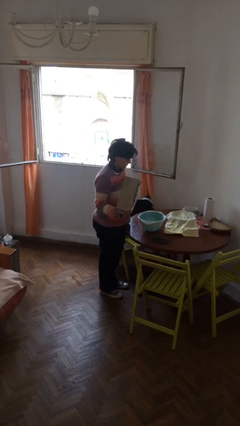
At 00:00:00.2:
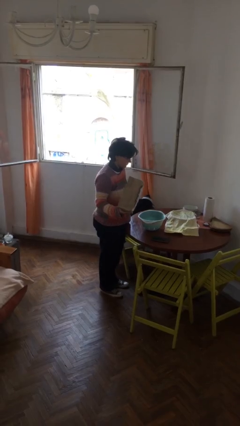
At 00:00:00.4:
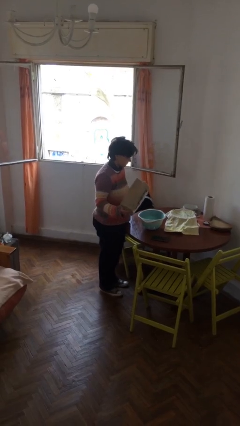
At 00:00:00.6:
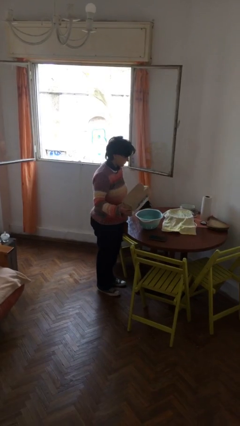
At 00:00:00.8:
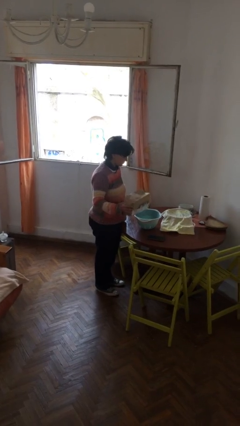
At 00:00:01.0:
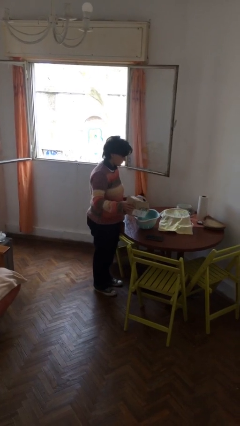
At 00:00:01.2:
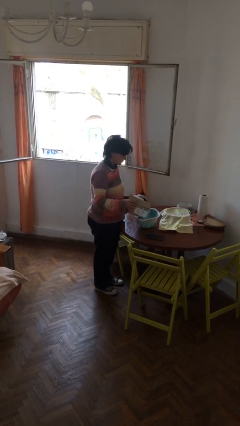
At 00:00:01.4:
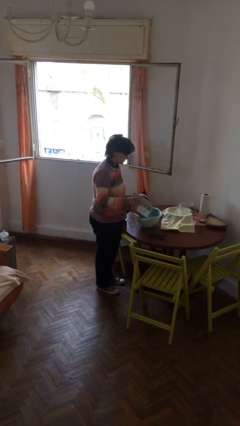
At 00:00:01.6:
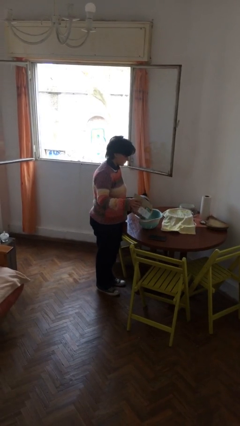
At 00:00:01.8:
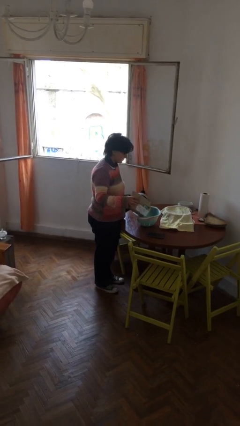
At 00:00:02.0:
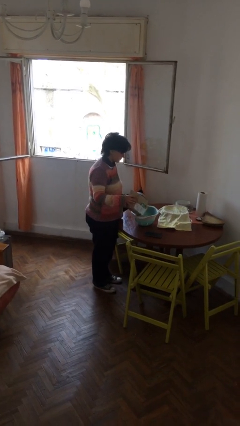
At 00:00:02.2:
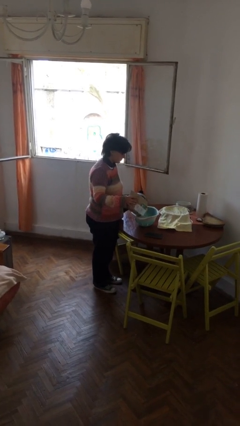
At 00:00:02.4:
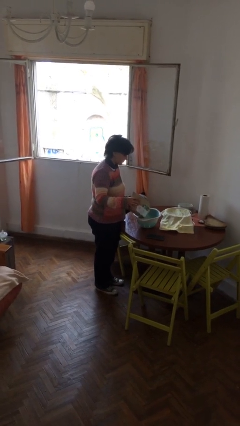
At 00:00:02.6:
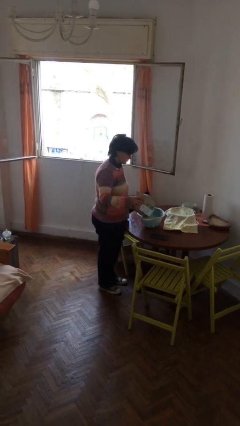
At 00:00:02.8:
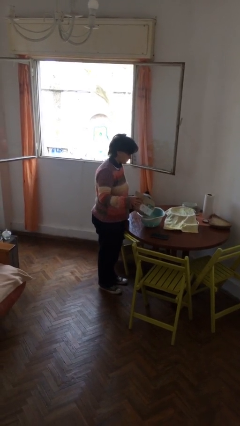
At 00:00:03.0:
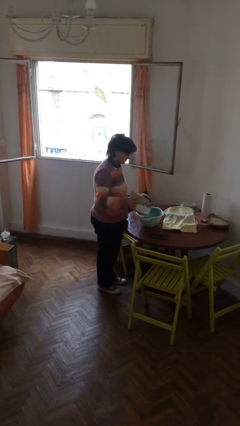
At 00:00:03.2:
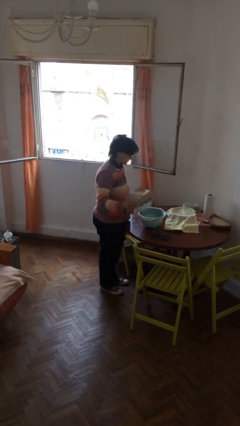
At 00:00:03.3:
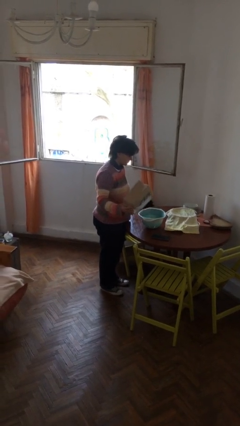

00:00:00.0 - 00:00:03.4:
person pours into bowl

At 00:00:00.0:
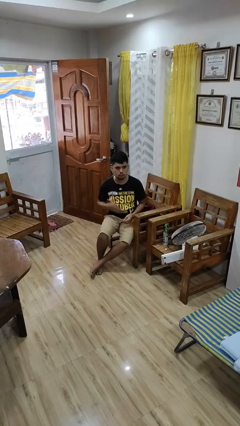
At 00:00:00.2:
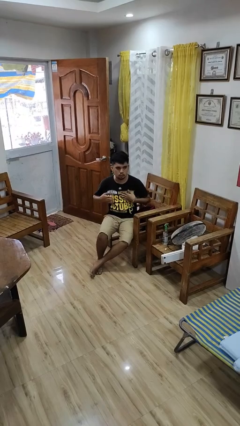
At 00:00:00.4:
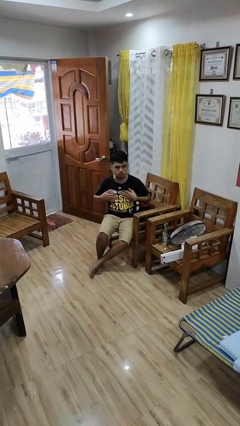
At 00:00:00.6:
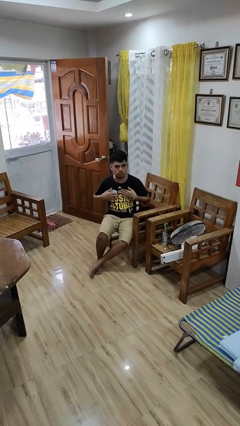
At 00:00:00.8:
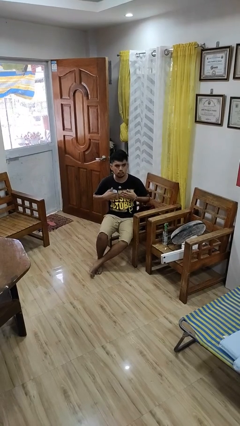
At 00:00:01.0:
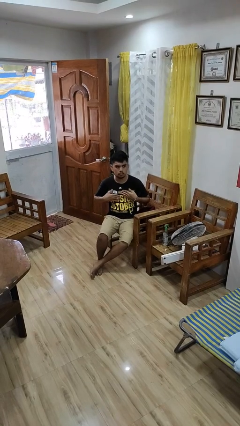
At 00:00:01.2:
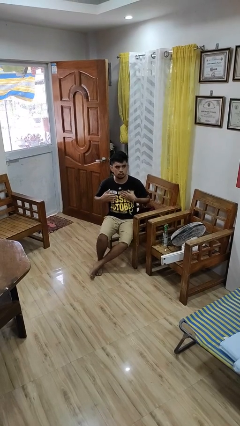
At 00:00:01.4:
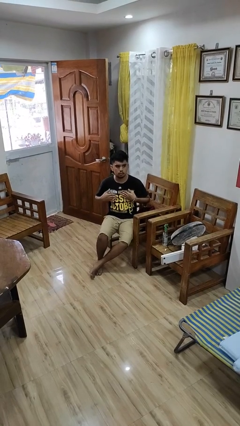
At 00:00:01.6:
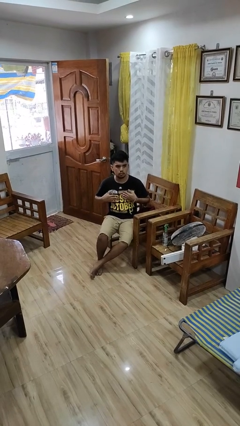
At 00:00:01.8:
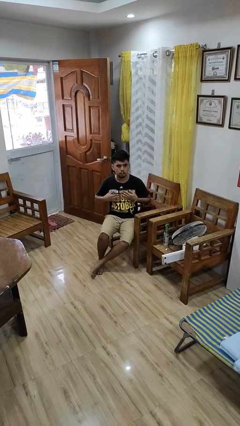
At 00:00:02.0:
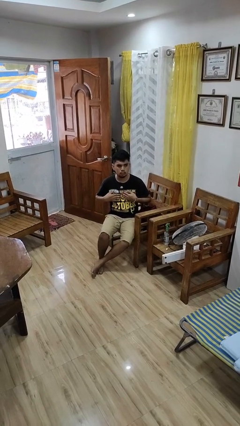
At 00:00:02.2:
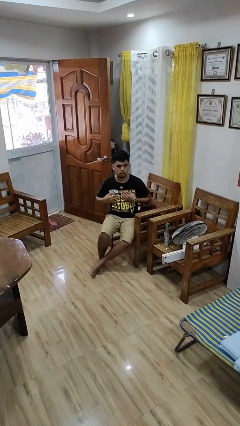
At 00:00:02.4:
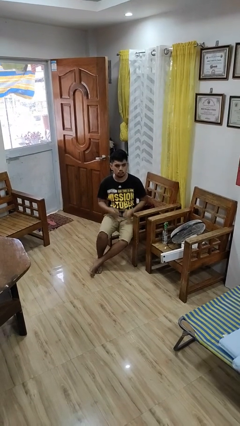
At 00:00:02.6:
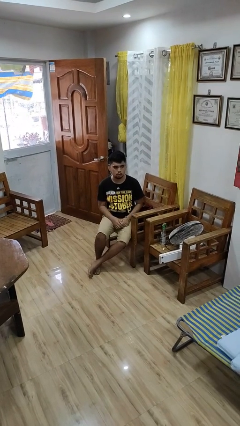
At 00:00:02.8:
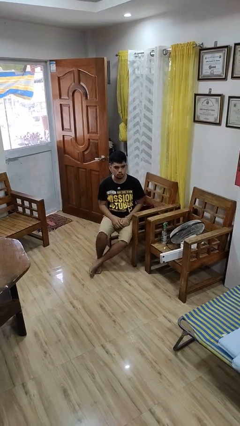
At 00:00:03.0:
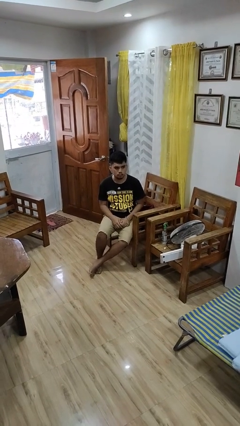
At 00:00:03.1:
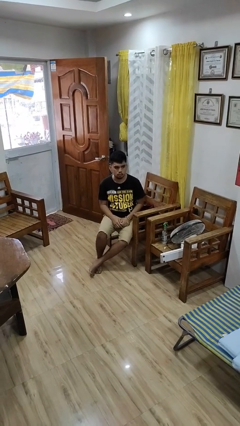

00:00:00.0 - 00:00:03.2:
person drums on chest

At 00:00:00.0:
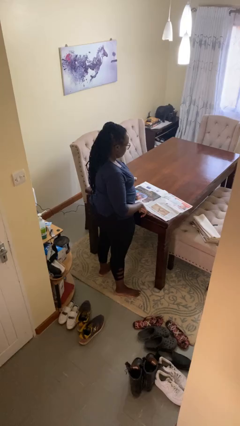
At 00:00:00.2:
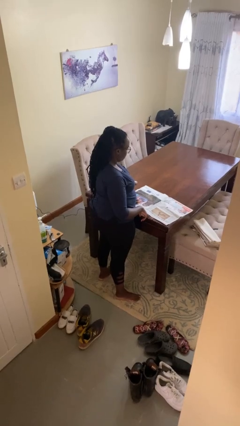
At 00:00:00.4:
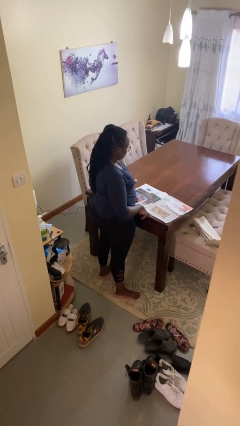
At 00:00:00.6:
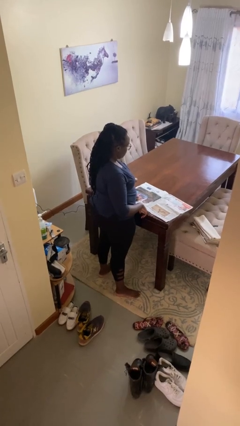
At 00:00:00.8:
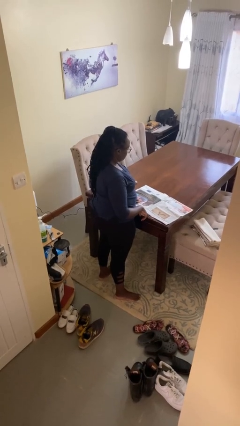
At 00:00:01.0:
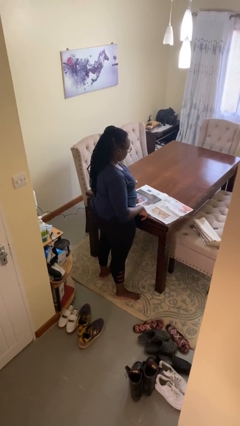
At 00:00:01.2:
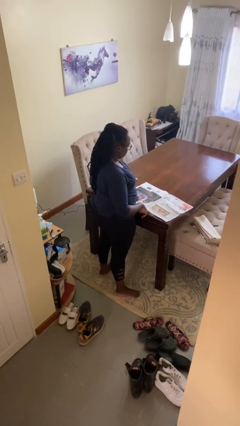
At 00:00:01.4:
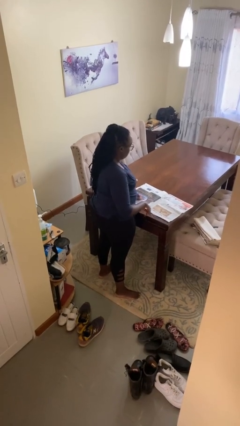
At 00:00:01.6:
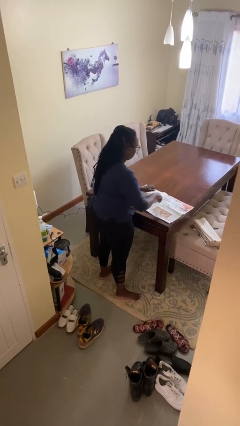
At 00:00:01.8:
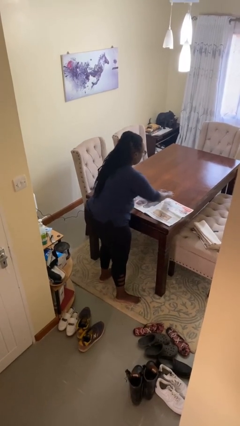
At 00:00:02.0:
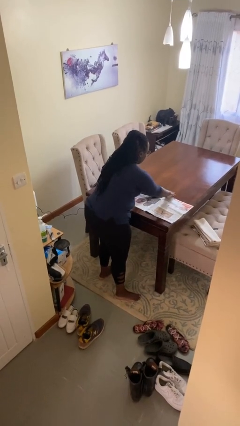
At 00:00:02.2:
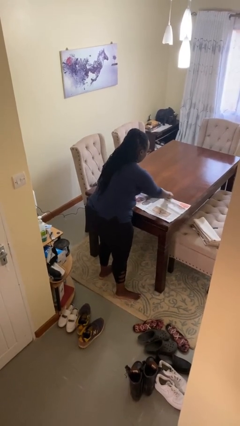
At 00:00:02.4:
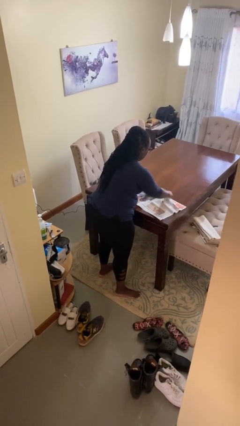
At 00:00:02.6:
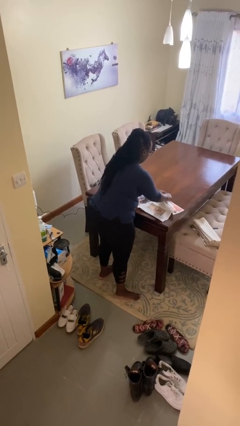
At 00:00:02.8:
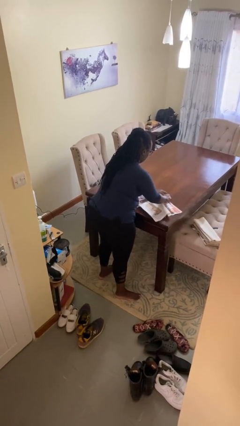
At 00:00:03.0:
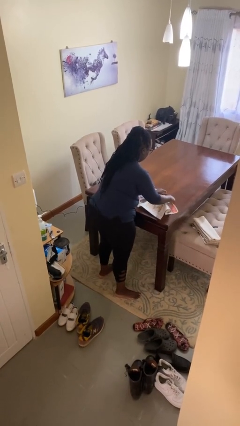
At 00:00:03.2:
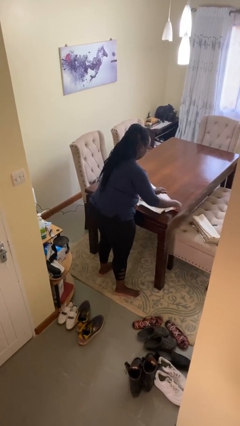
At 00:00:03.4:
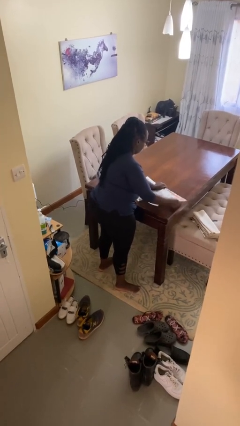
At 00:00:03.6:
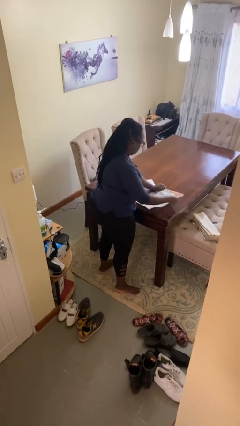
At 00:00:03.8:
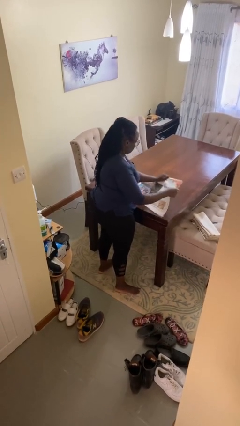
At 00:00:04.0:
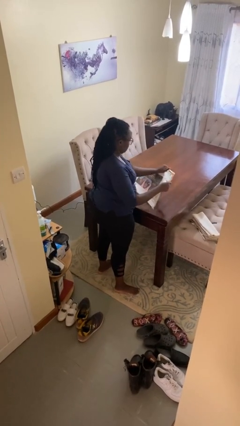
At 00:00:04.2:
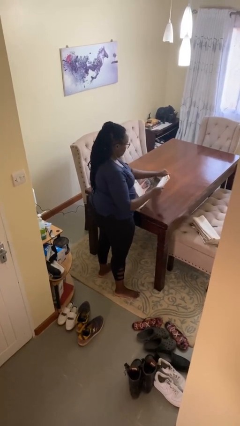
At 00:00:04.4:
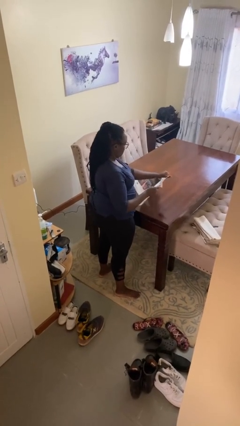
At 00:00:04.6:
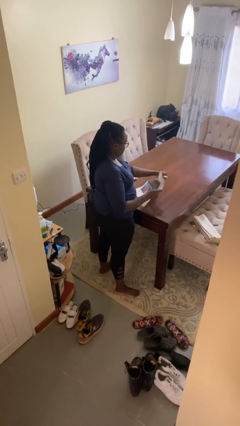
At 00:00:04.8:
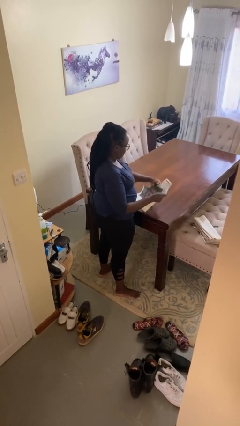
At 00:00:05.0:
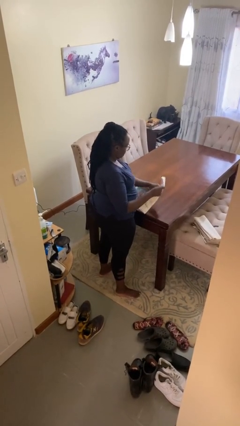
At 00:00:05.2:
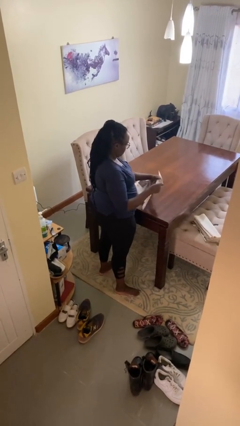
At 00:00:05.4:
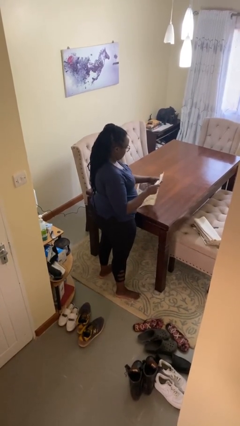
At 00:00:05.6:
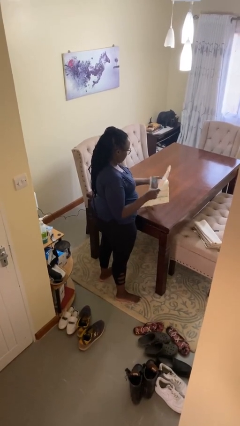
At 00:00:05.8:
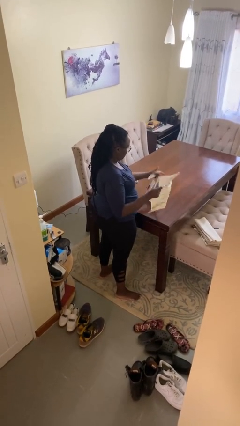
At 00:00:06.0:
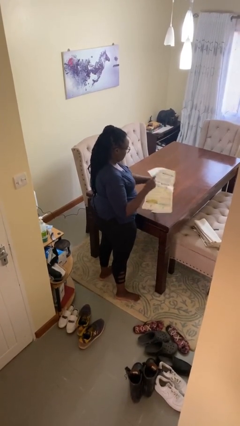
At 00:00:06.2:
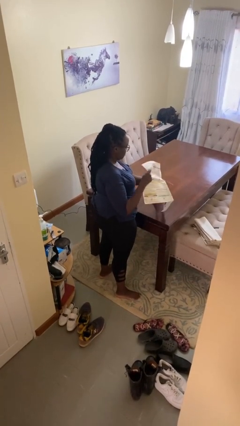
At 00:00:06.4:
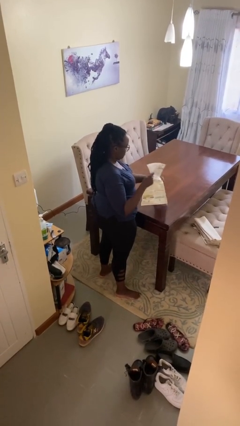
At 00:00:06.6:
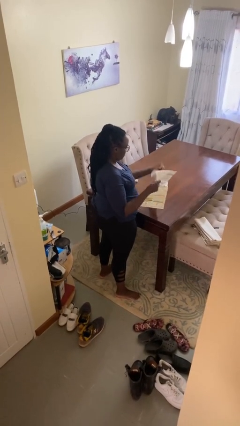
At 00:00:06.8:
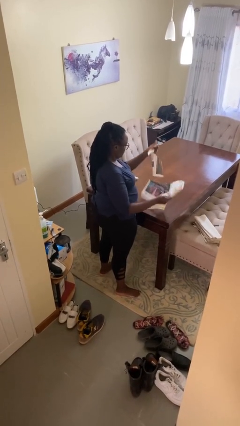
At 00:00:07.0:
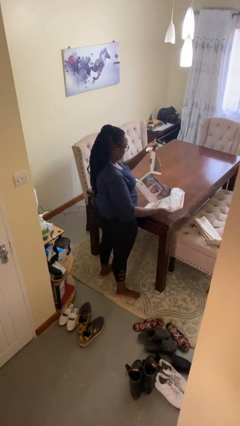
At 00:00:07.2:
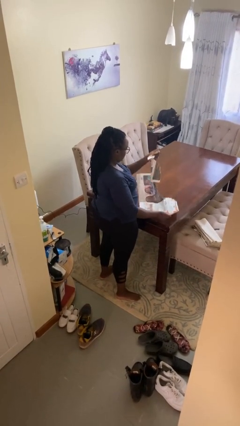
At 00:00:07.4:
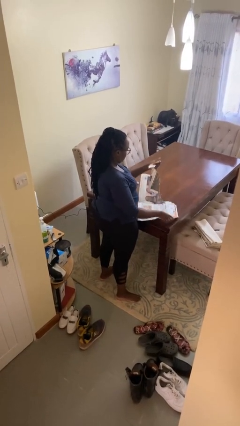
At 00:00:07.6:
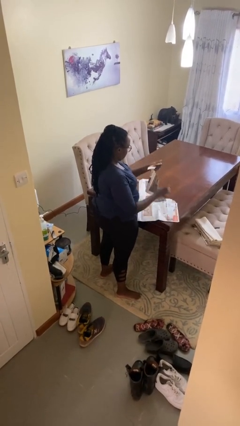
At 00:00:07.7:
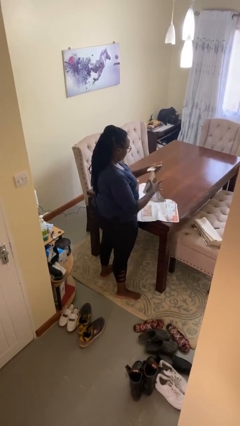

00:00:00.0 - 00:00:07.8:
person tears paper

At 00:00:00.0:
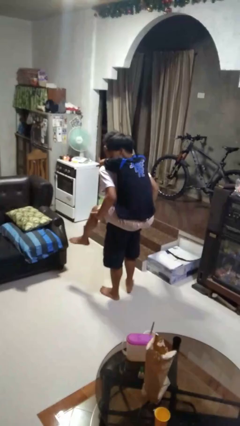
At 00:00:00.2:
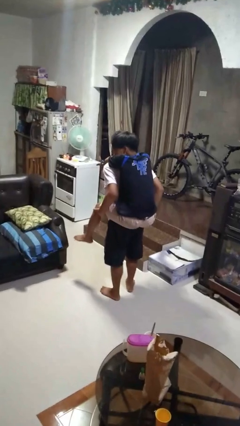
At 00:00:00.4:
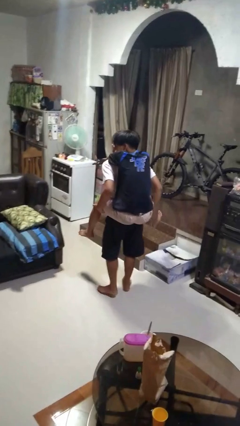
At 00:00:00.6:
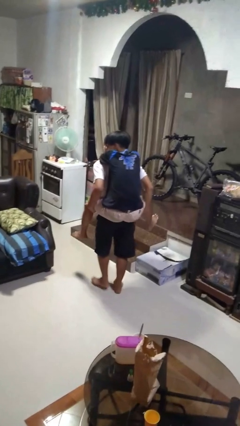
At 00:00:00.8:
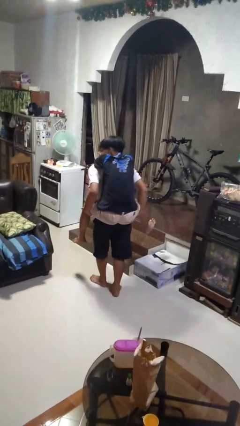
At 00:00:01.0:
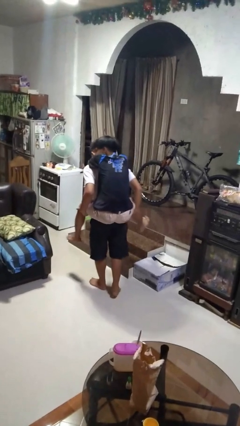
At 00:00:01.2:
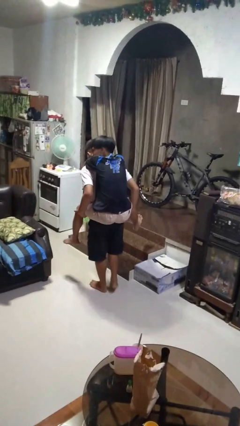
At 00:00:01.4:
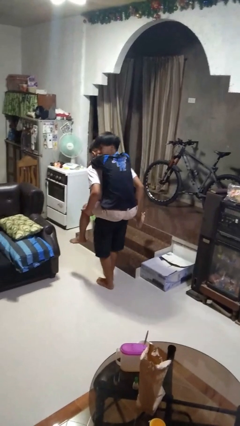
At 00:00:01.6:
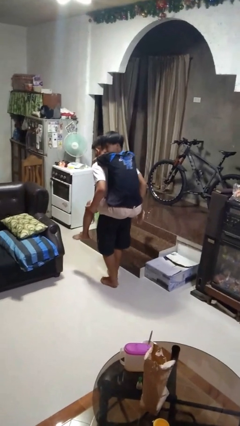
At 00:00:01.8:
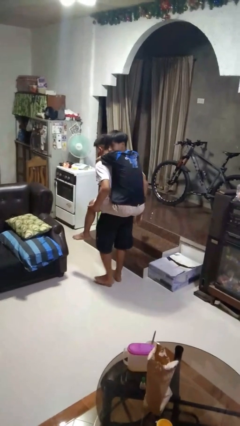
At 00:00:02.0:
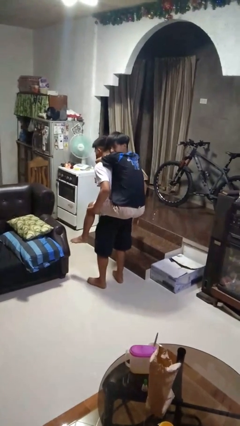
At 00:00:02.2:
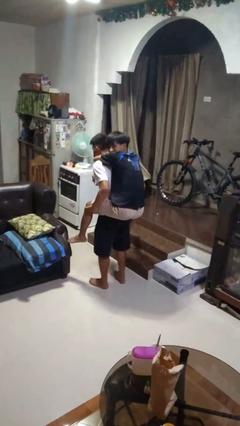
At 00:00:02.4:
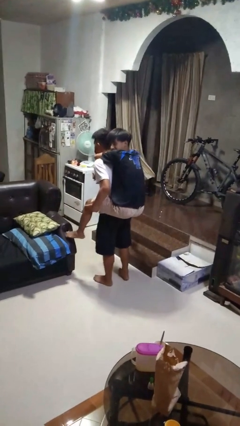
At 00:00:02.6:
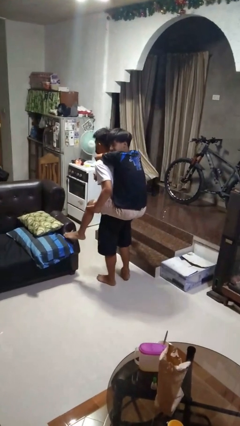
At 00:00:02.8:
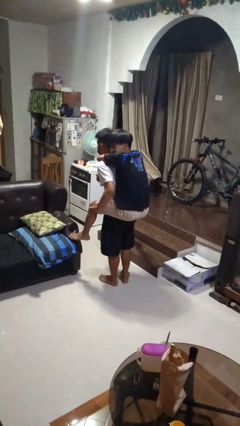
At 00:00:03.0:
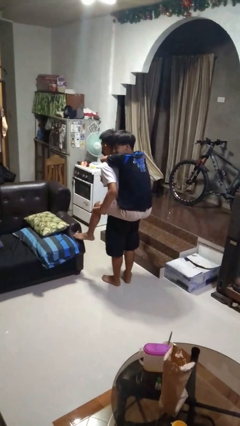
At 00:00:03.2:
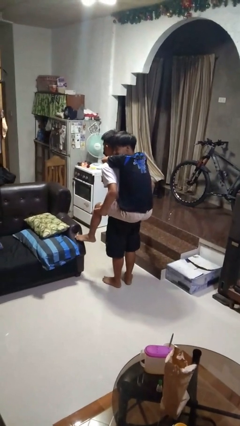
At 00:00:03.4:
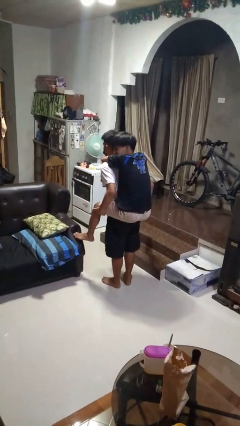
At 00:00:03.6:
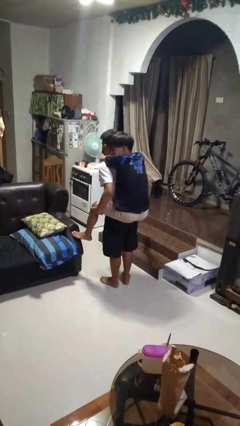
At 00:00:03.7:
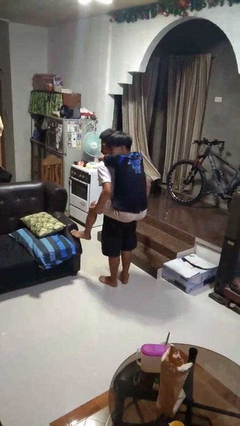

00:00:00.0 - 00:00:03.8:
person carries person on back
